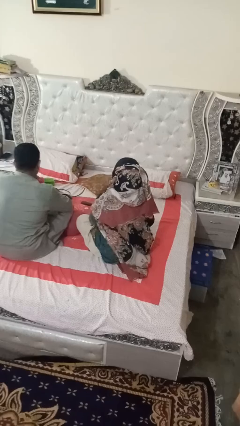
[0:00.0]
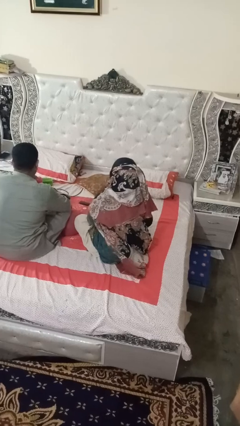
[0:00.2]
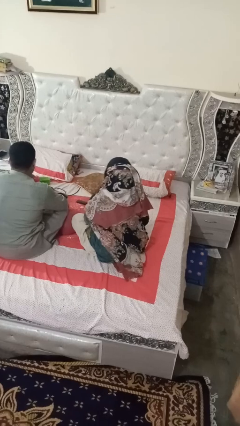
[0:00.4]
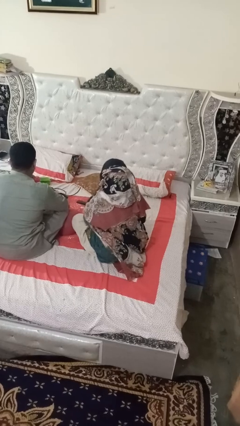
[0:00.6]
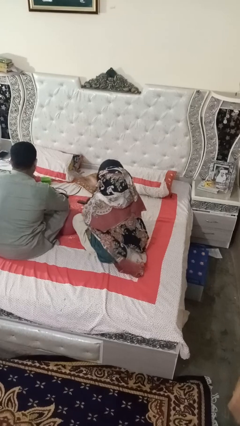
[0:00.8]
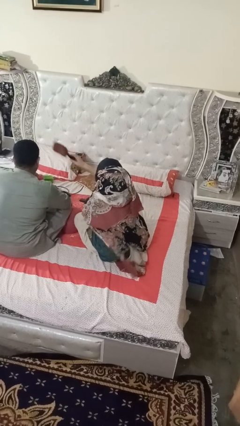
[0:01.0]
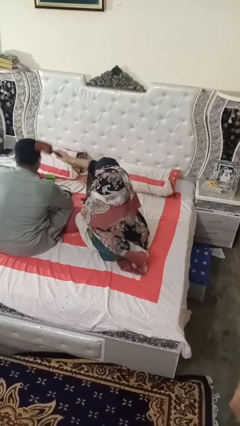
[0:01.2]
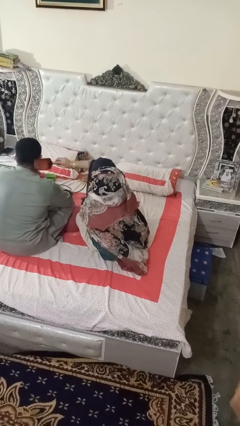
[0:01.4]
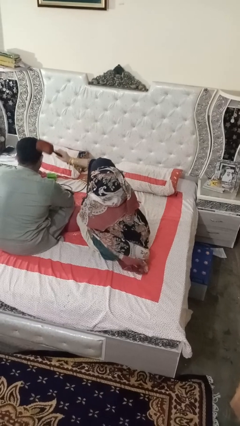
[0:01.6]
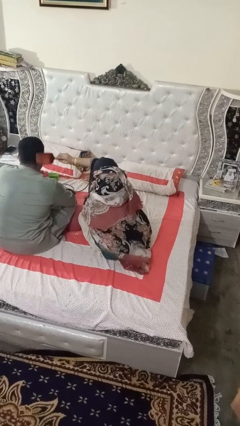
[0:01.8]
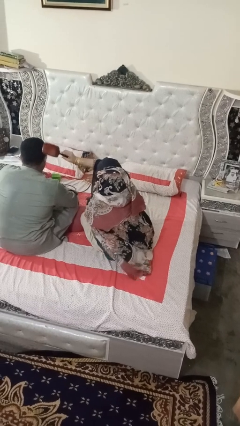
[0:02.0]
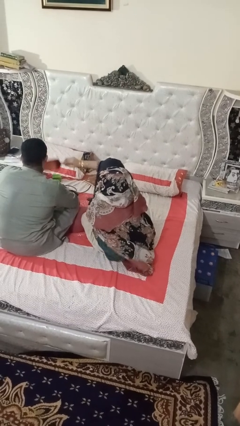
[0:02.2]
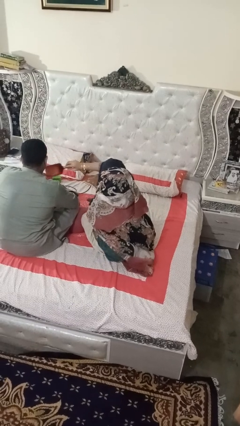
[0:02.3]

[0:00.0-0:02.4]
person brushes hair of person

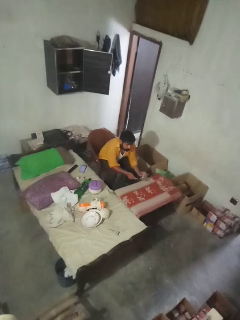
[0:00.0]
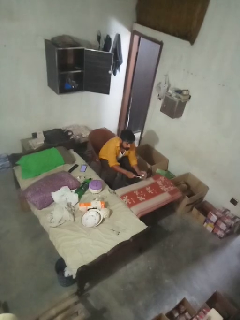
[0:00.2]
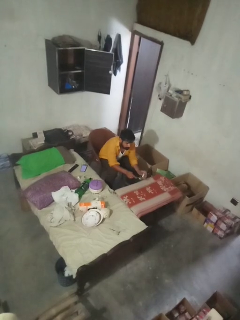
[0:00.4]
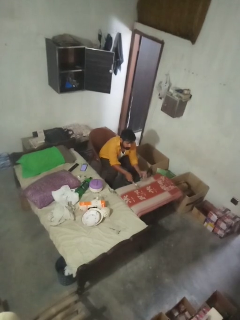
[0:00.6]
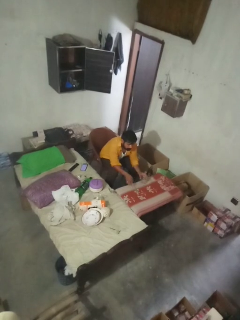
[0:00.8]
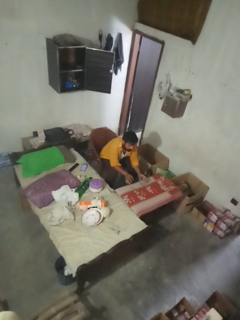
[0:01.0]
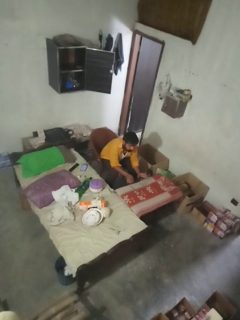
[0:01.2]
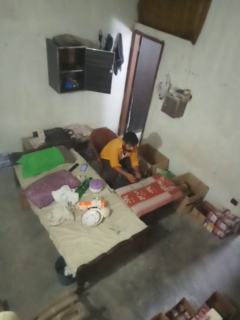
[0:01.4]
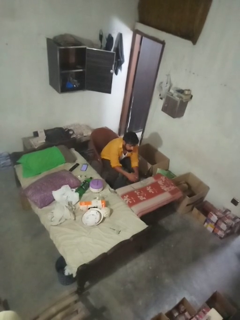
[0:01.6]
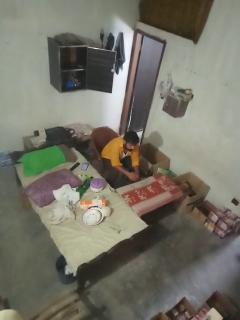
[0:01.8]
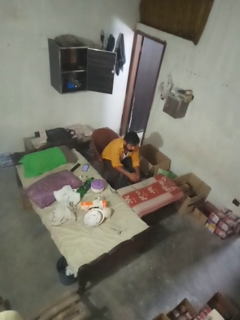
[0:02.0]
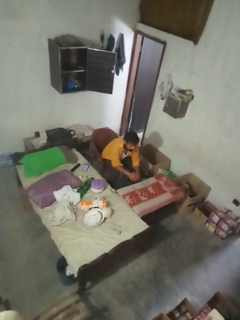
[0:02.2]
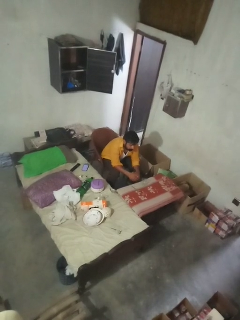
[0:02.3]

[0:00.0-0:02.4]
person sets upright glass

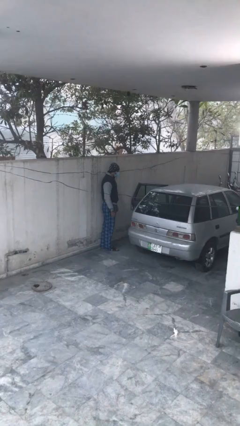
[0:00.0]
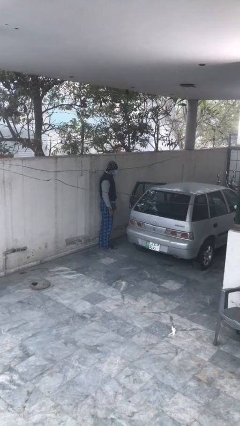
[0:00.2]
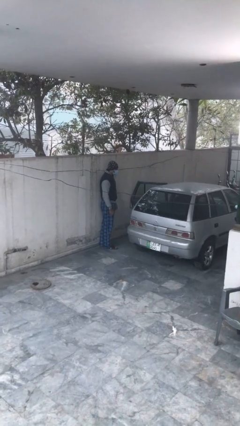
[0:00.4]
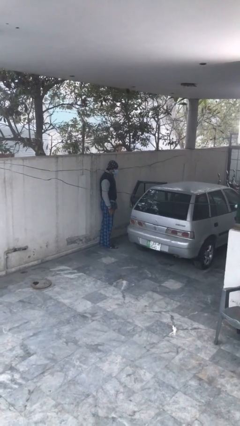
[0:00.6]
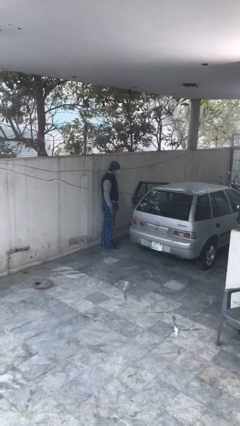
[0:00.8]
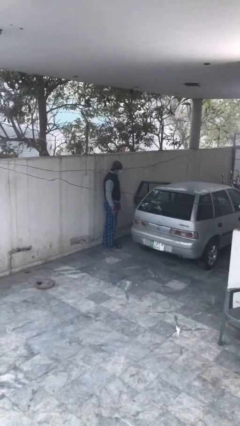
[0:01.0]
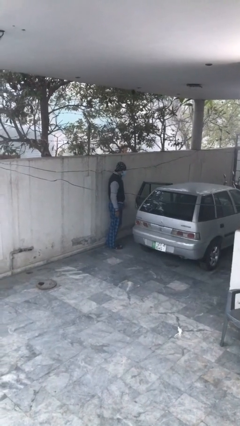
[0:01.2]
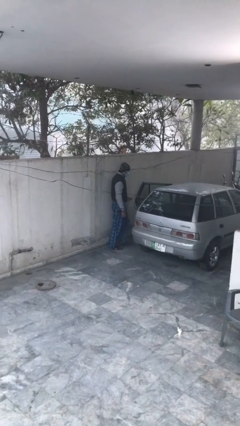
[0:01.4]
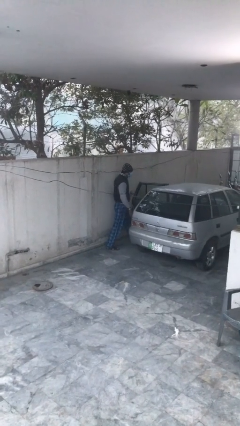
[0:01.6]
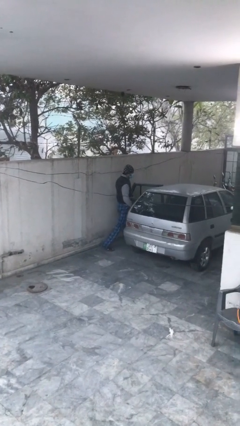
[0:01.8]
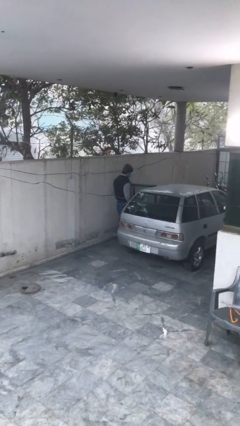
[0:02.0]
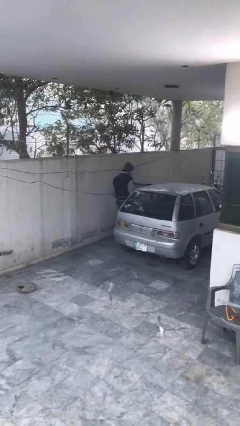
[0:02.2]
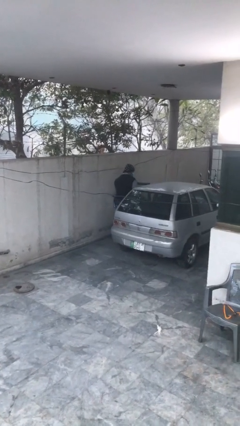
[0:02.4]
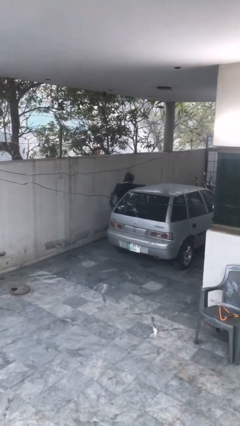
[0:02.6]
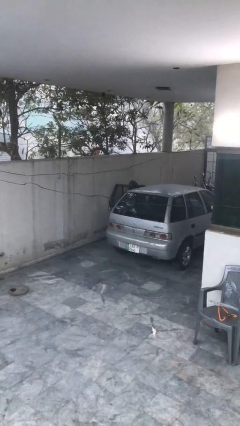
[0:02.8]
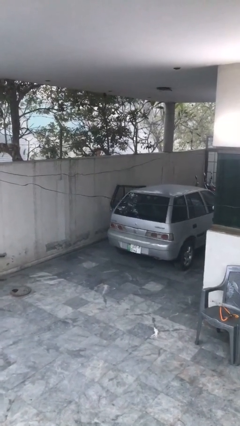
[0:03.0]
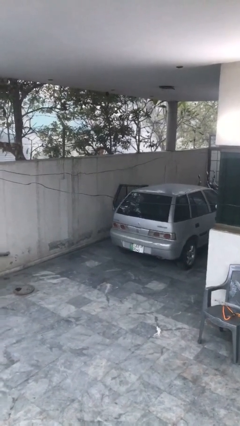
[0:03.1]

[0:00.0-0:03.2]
person enters car

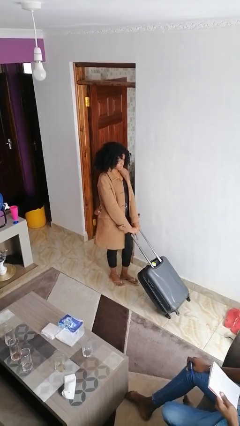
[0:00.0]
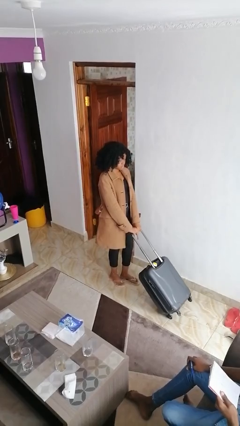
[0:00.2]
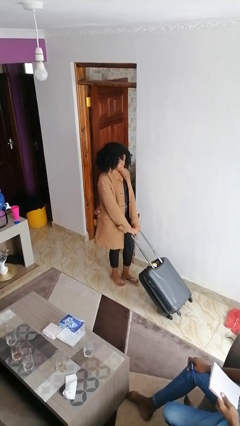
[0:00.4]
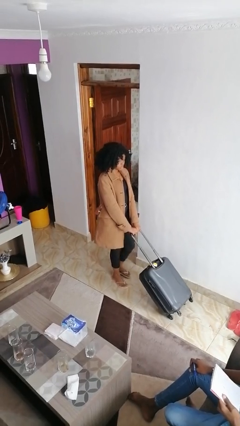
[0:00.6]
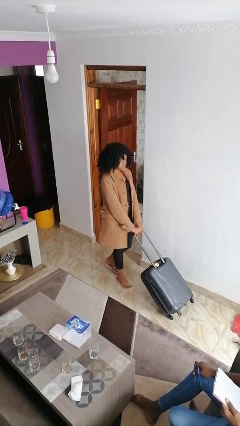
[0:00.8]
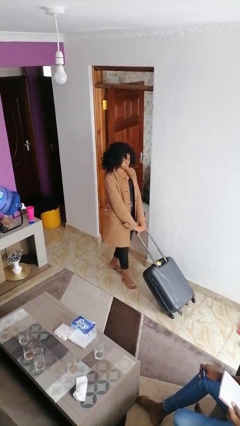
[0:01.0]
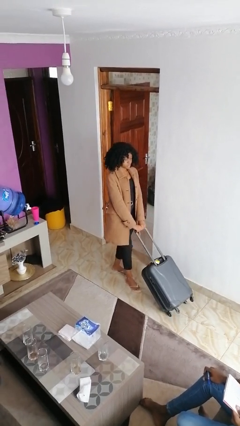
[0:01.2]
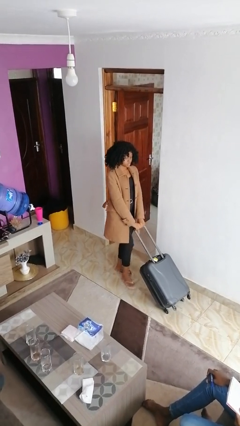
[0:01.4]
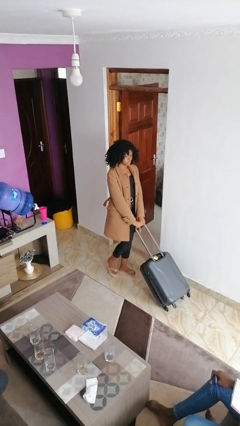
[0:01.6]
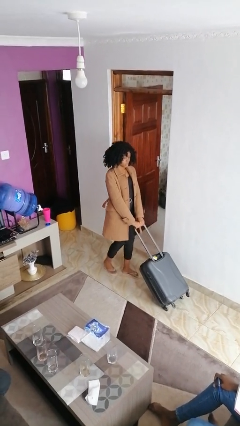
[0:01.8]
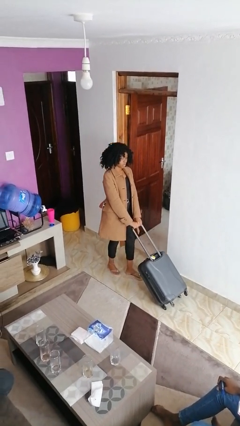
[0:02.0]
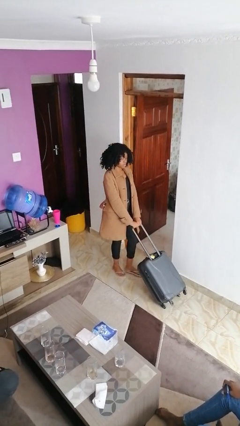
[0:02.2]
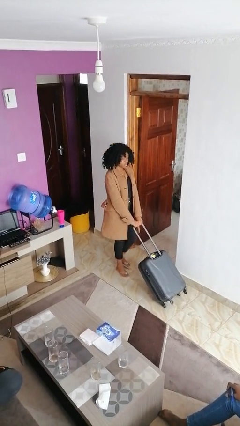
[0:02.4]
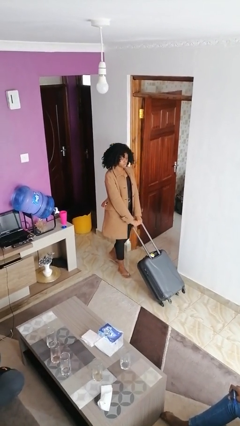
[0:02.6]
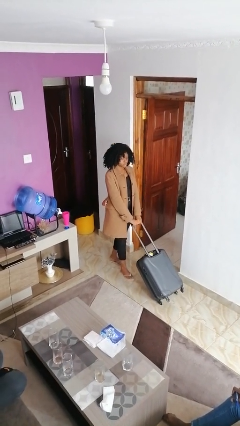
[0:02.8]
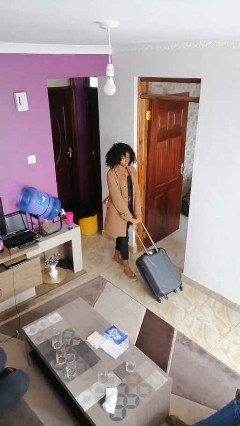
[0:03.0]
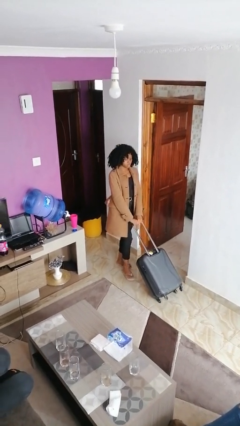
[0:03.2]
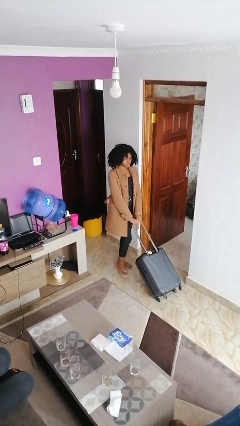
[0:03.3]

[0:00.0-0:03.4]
person pulls wheeled cart

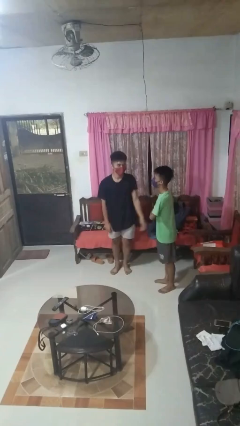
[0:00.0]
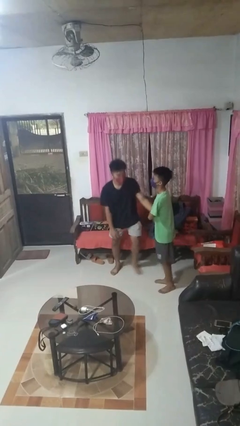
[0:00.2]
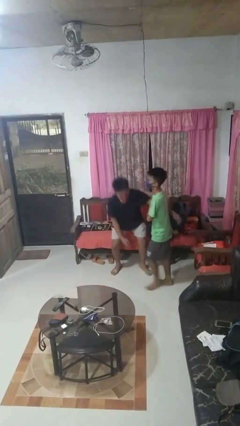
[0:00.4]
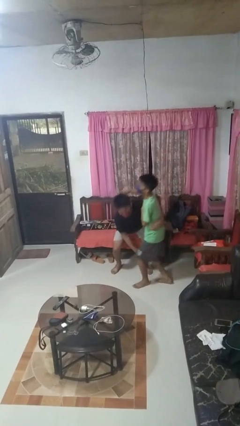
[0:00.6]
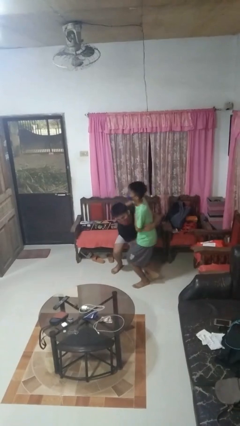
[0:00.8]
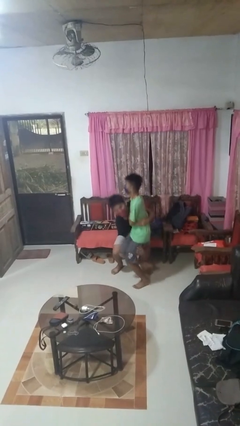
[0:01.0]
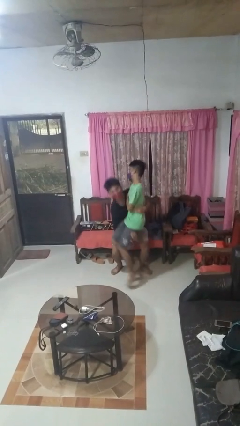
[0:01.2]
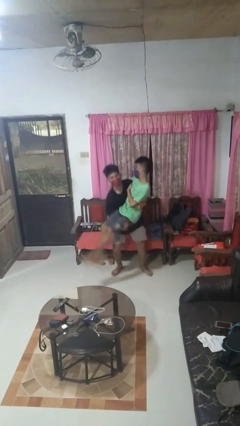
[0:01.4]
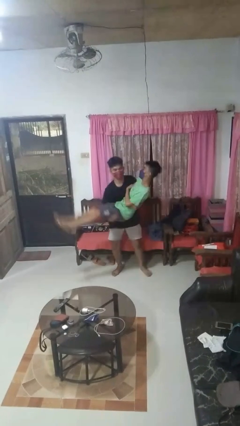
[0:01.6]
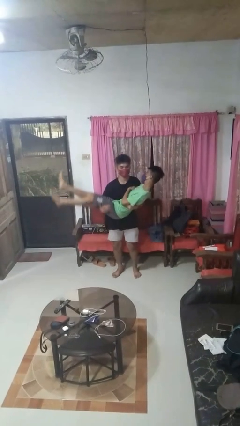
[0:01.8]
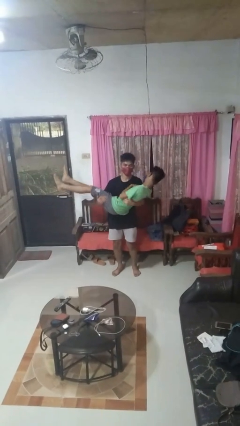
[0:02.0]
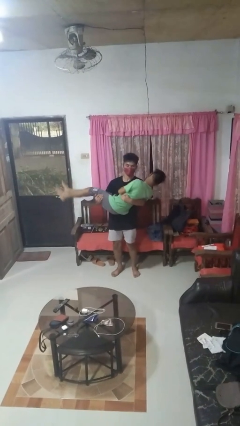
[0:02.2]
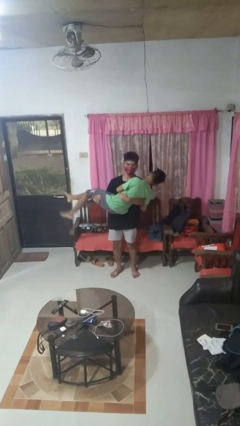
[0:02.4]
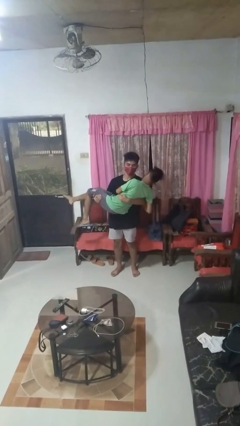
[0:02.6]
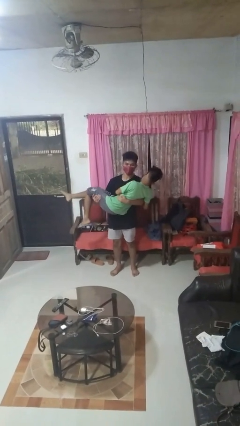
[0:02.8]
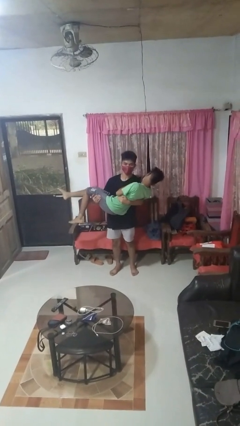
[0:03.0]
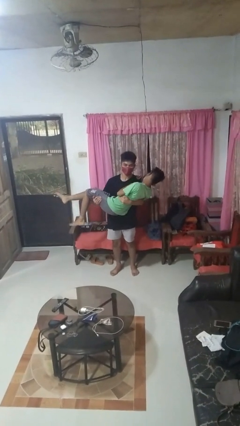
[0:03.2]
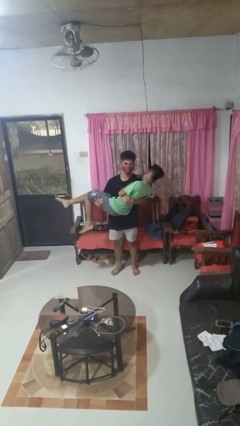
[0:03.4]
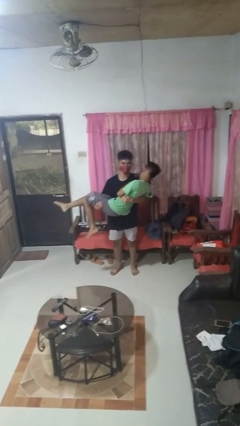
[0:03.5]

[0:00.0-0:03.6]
person picks up person

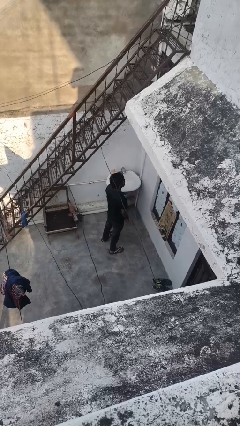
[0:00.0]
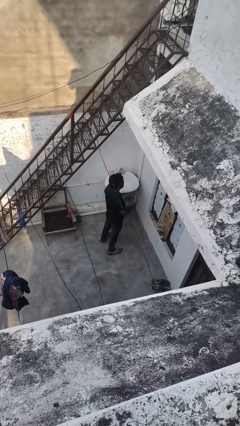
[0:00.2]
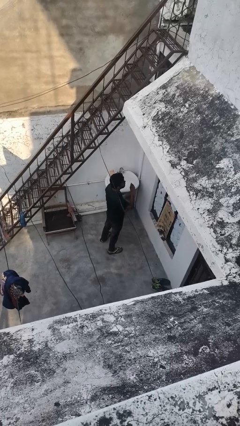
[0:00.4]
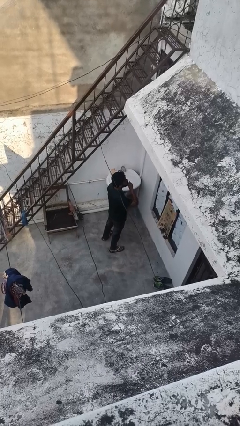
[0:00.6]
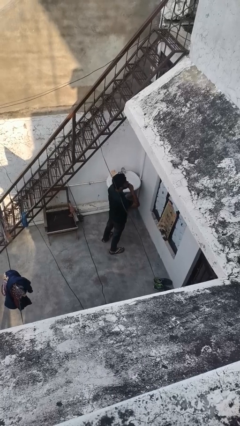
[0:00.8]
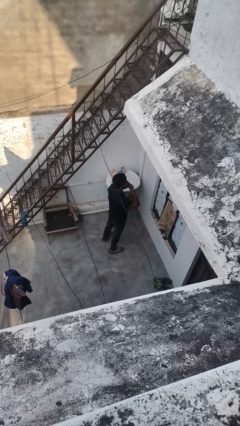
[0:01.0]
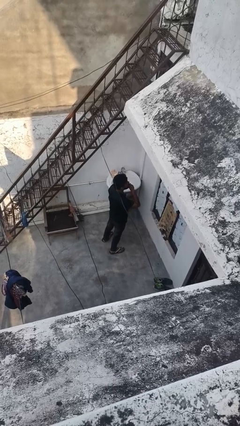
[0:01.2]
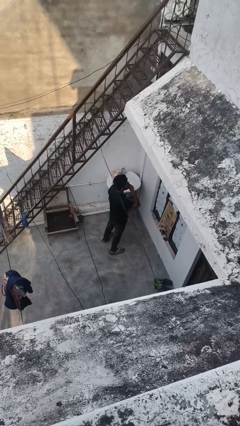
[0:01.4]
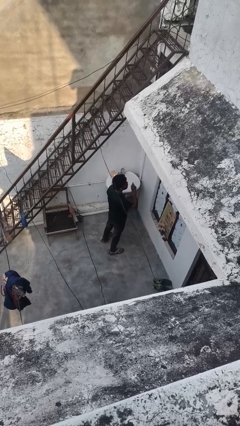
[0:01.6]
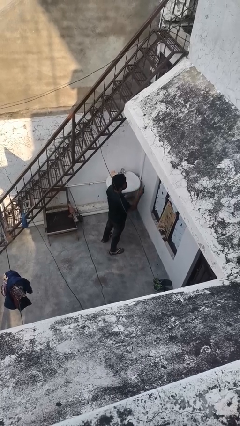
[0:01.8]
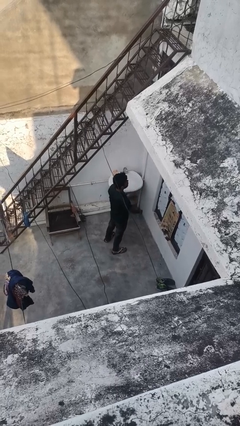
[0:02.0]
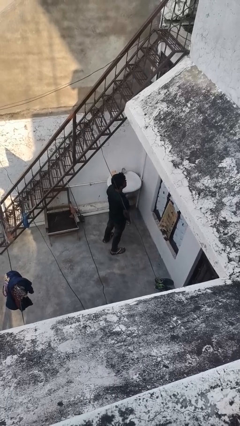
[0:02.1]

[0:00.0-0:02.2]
person gestures be quiet

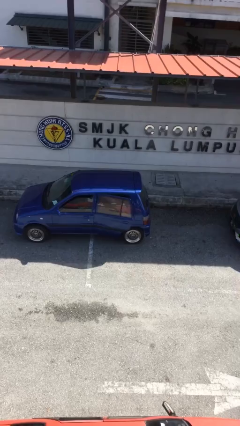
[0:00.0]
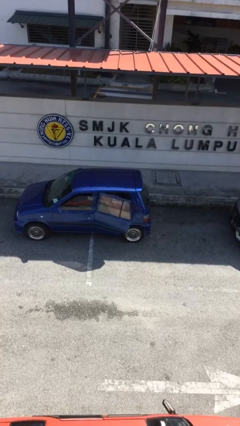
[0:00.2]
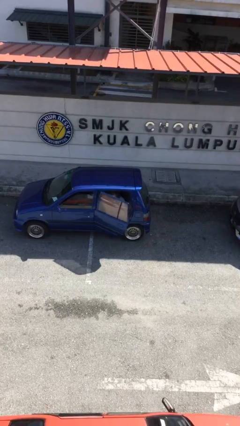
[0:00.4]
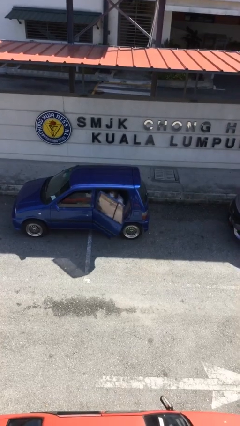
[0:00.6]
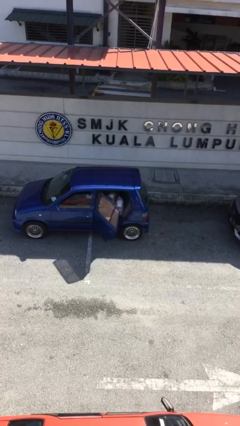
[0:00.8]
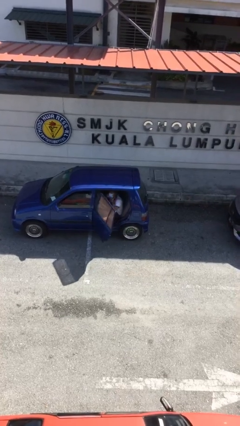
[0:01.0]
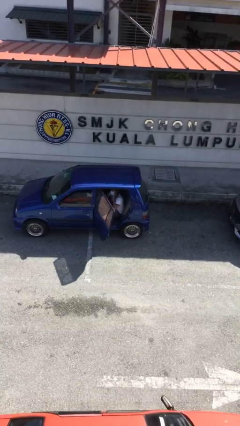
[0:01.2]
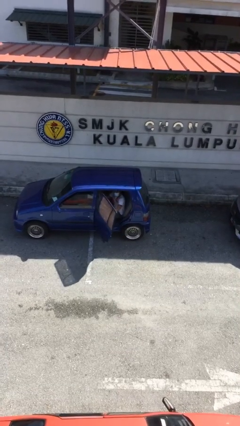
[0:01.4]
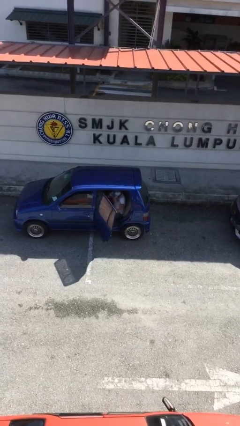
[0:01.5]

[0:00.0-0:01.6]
person opens car door
